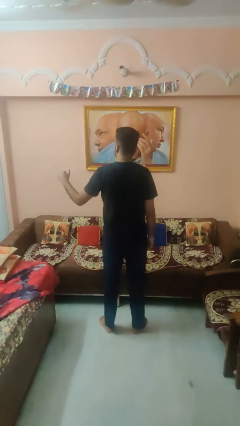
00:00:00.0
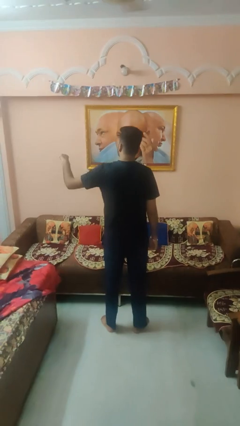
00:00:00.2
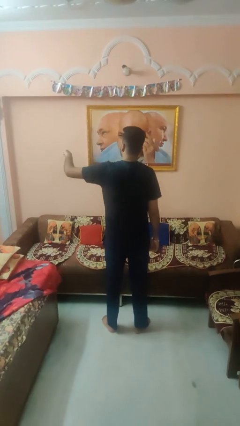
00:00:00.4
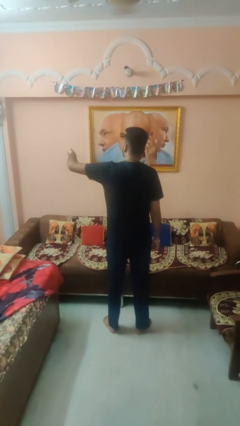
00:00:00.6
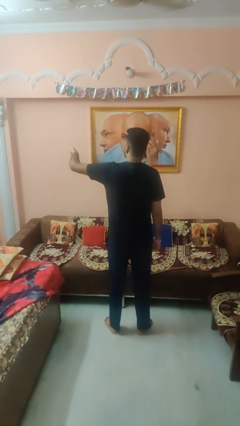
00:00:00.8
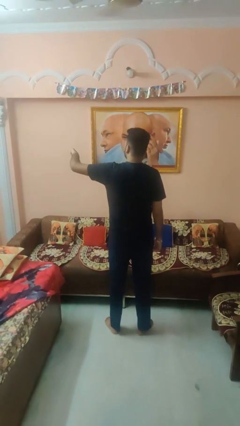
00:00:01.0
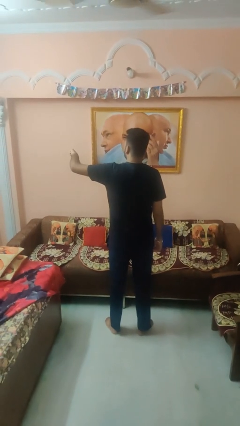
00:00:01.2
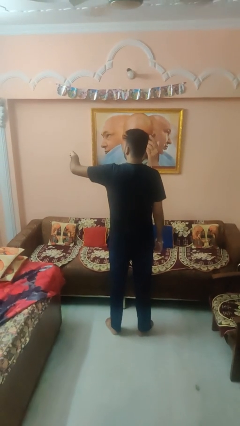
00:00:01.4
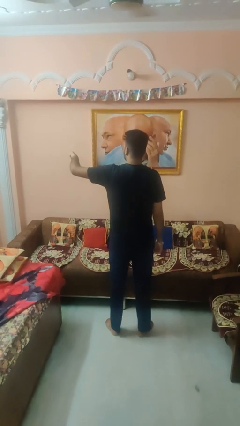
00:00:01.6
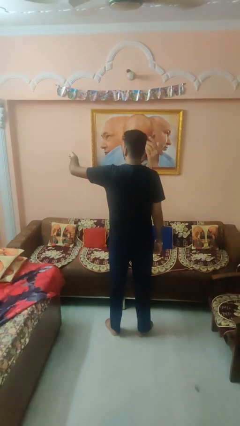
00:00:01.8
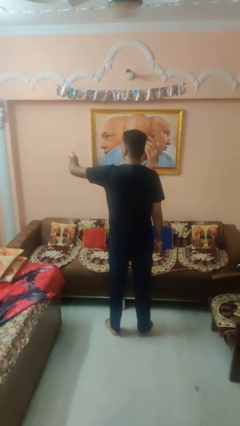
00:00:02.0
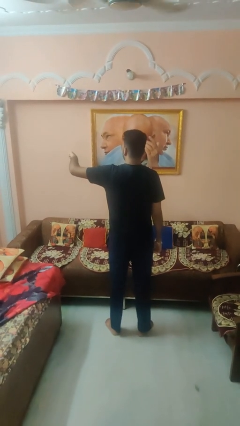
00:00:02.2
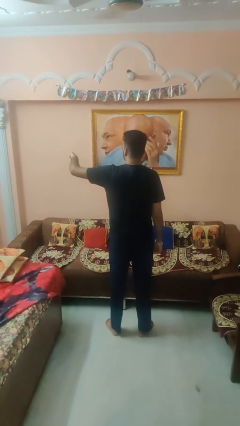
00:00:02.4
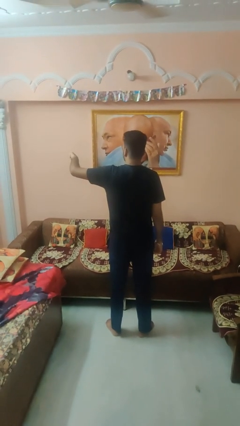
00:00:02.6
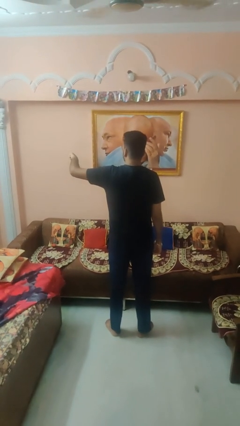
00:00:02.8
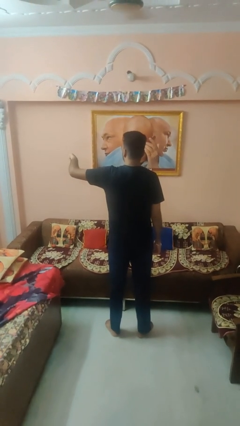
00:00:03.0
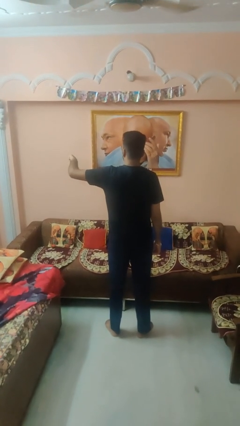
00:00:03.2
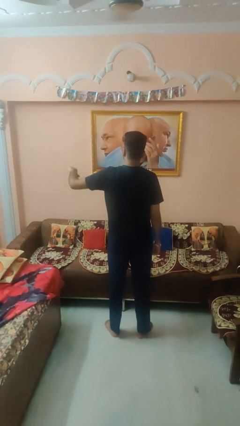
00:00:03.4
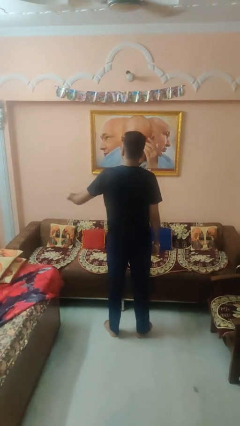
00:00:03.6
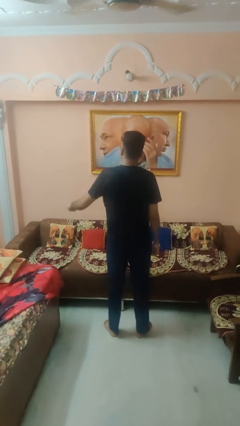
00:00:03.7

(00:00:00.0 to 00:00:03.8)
person gestures thumbs down

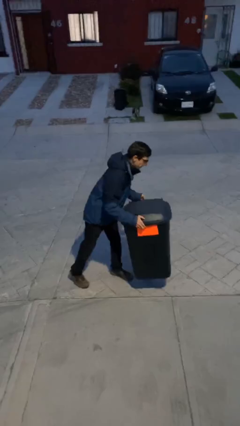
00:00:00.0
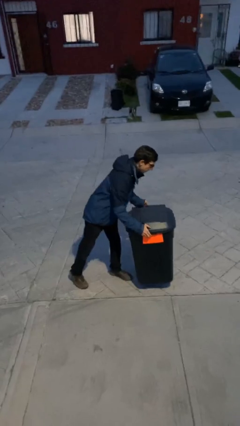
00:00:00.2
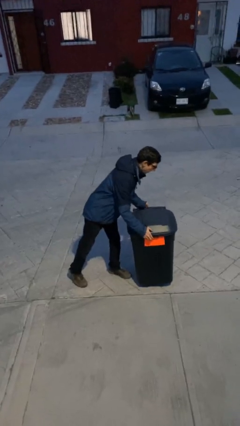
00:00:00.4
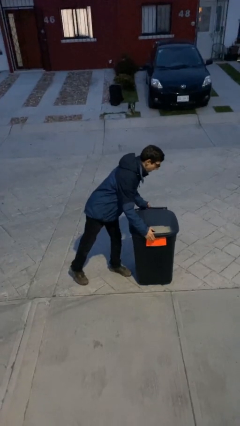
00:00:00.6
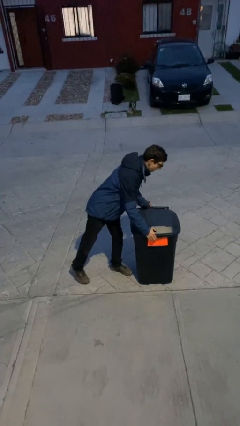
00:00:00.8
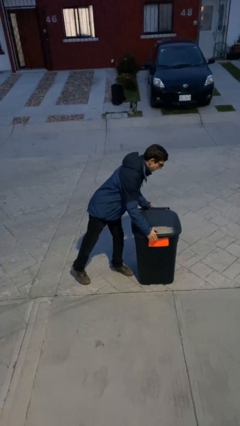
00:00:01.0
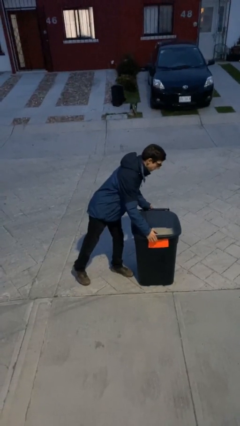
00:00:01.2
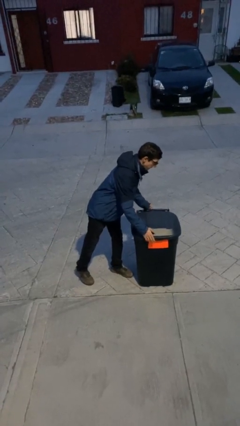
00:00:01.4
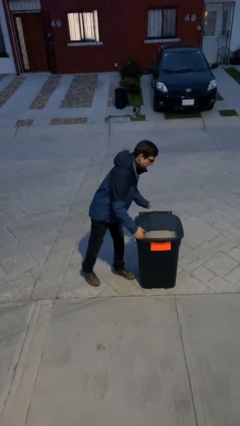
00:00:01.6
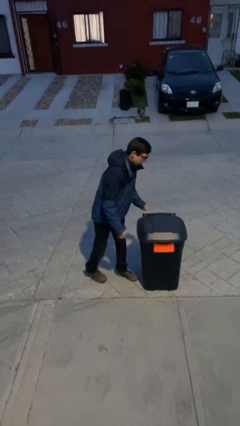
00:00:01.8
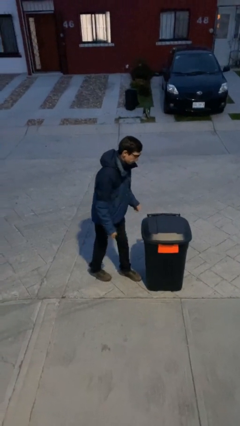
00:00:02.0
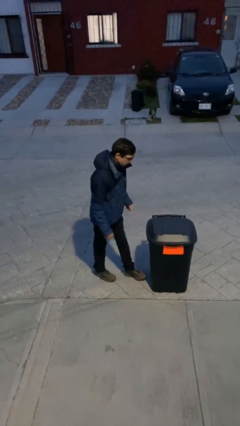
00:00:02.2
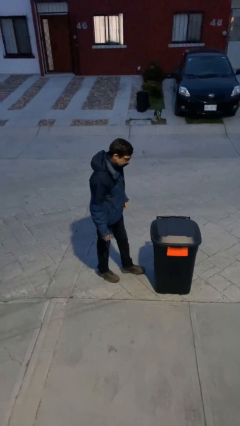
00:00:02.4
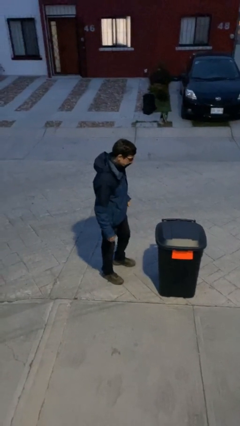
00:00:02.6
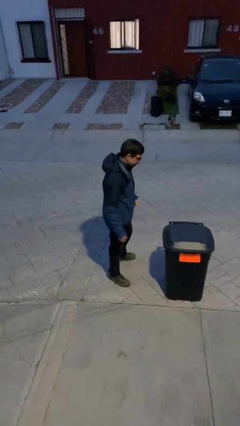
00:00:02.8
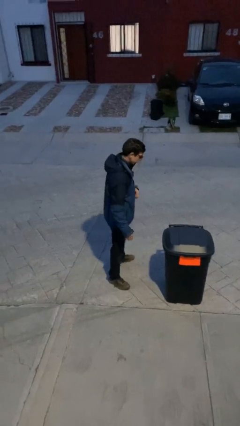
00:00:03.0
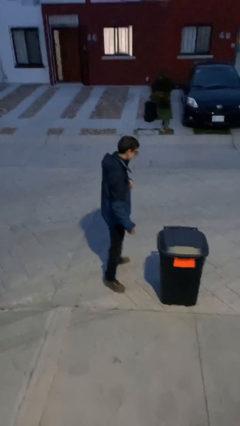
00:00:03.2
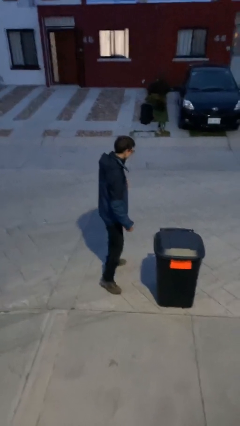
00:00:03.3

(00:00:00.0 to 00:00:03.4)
person puts down object on floor

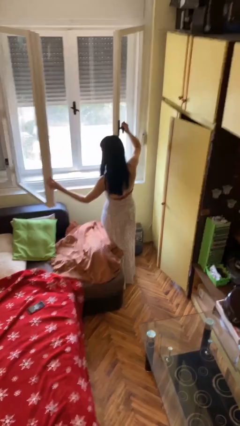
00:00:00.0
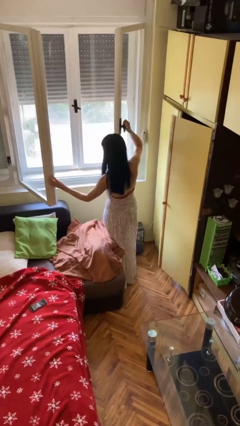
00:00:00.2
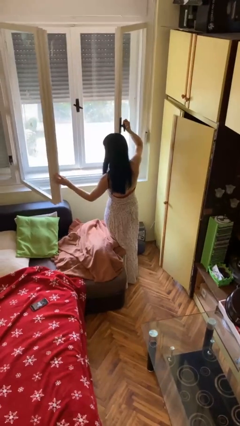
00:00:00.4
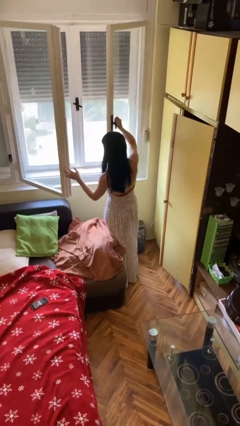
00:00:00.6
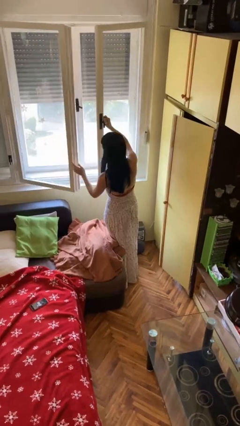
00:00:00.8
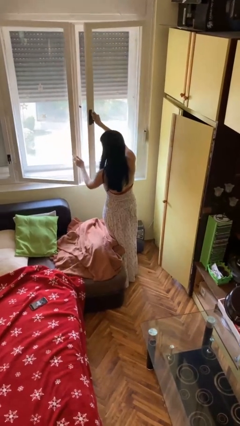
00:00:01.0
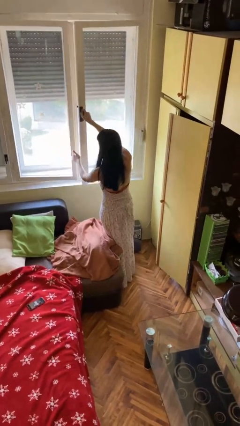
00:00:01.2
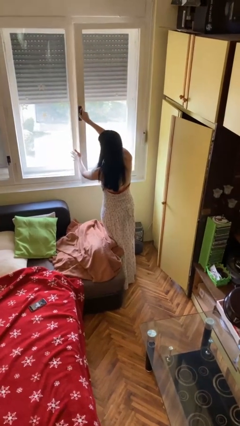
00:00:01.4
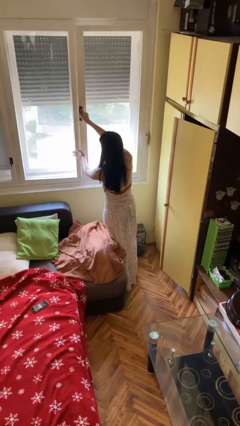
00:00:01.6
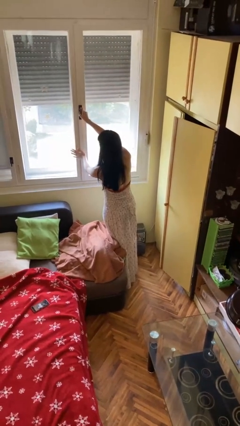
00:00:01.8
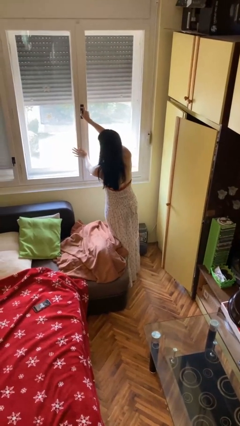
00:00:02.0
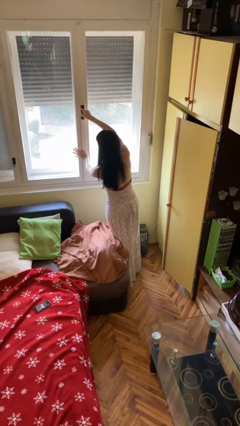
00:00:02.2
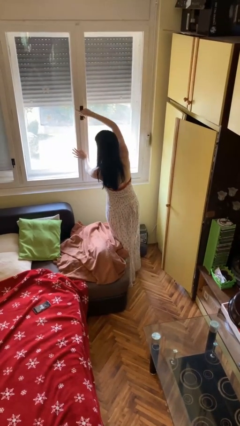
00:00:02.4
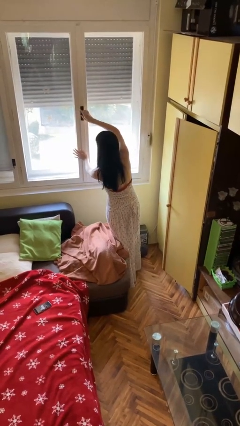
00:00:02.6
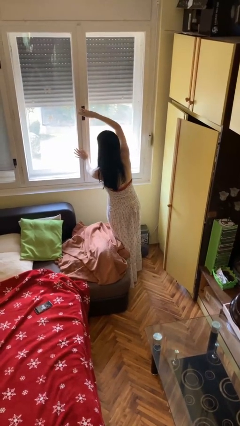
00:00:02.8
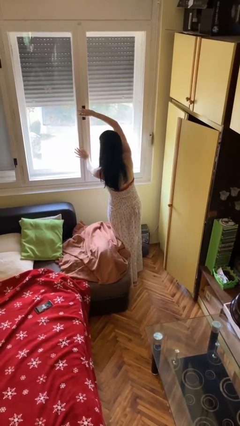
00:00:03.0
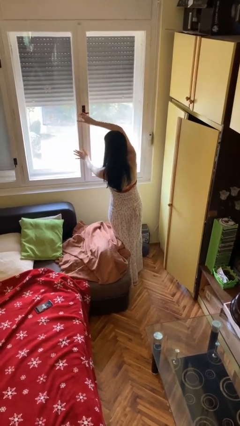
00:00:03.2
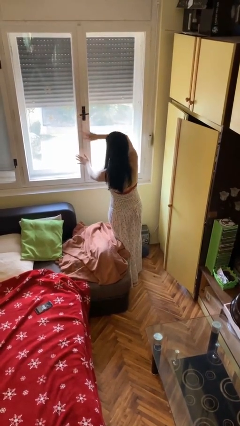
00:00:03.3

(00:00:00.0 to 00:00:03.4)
person closes microwave

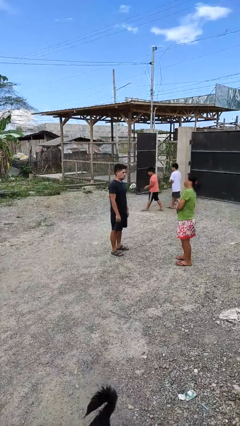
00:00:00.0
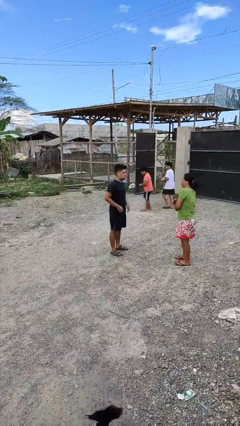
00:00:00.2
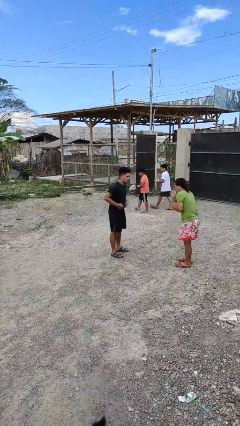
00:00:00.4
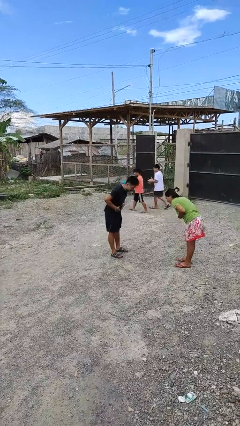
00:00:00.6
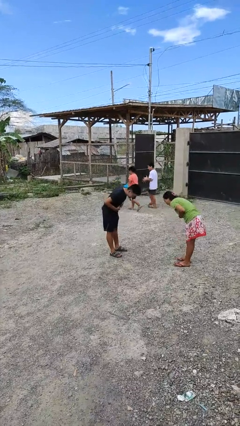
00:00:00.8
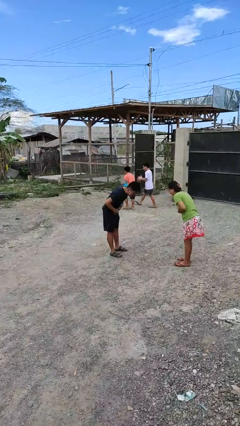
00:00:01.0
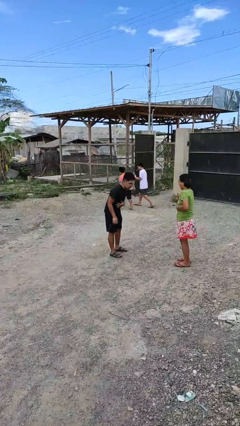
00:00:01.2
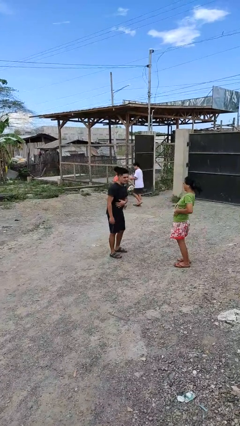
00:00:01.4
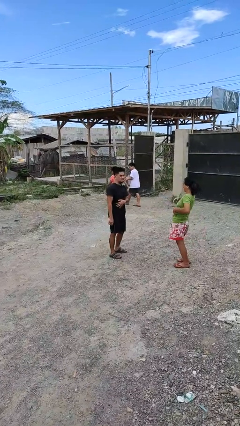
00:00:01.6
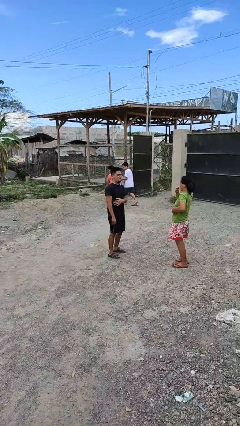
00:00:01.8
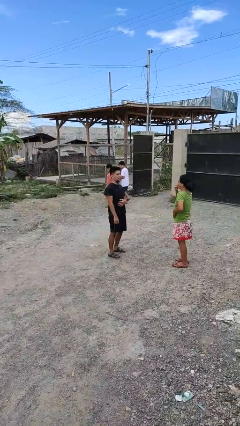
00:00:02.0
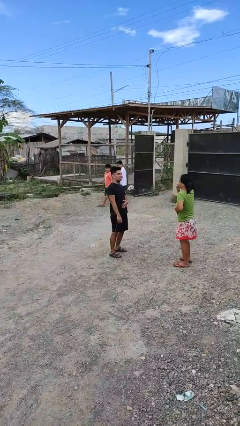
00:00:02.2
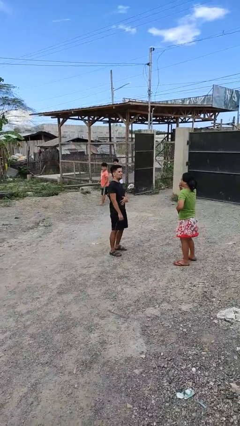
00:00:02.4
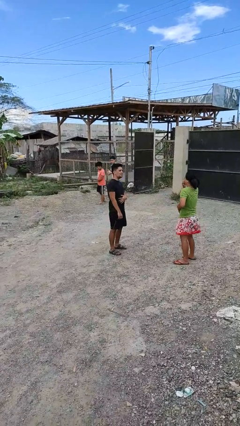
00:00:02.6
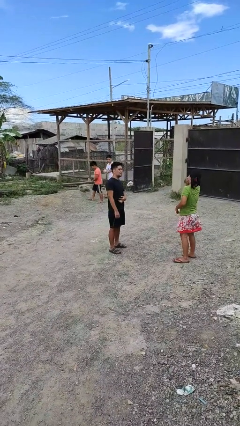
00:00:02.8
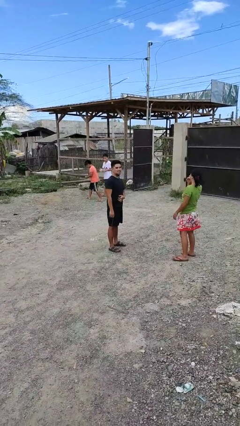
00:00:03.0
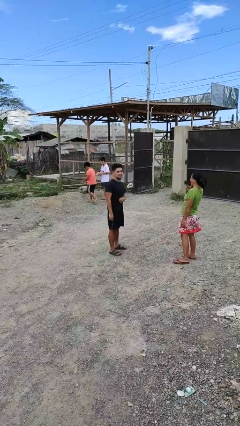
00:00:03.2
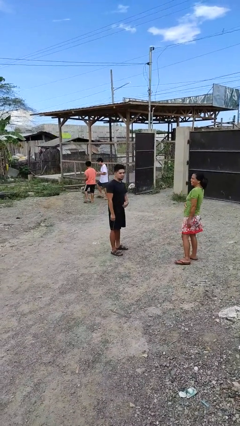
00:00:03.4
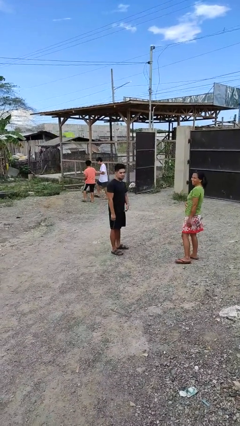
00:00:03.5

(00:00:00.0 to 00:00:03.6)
person laughs with person

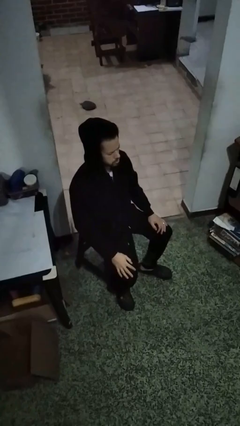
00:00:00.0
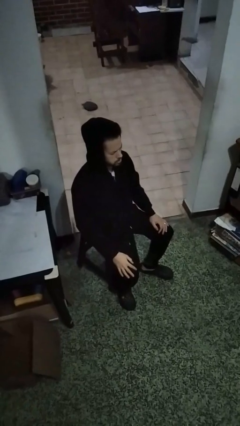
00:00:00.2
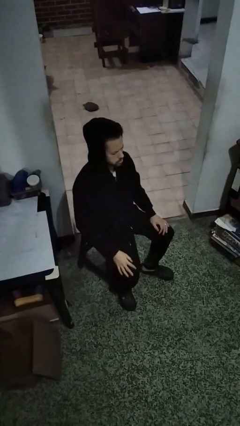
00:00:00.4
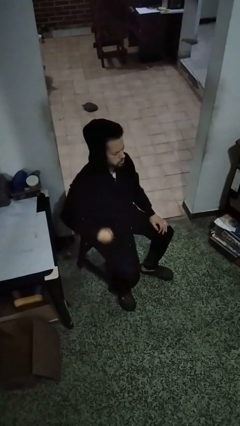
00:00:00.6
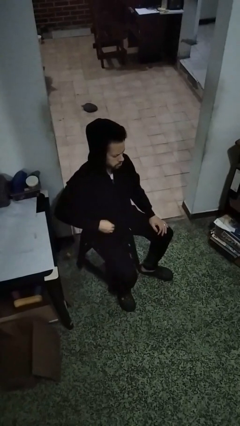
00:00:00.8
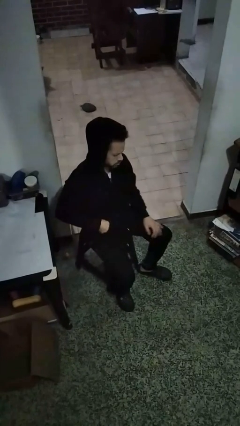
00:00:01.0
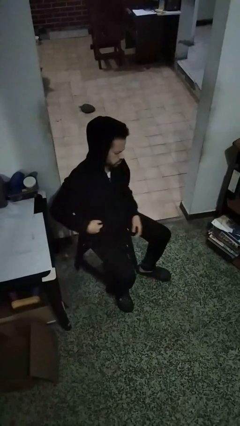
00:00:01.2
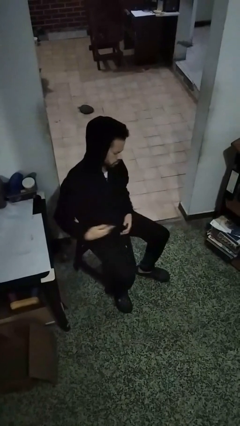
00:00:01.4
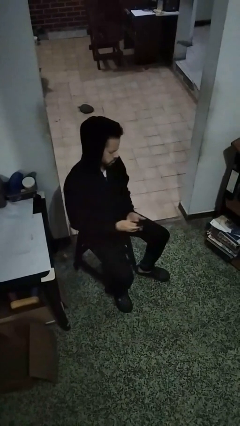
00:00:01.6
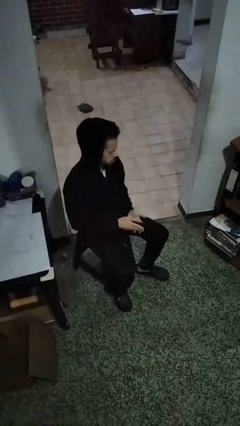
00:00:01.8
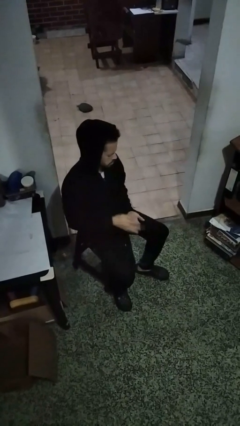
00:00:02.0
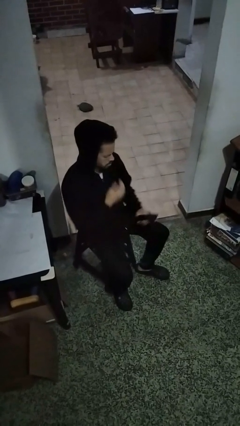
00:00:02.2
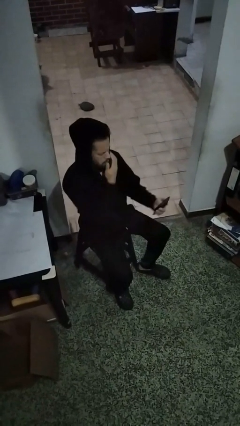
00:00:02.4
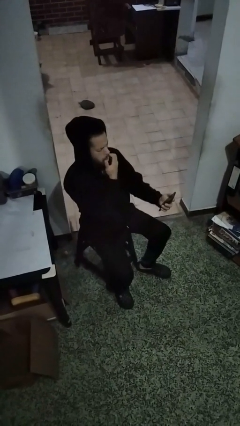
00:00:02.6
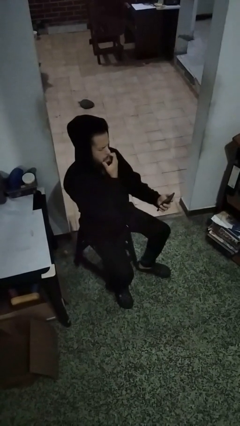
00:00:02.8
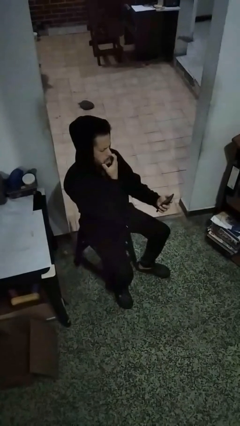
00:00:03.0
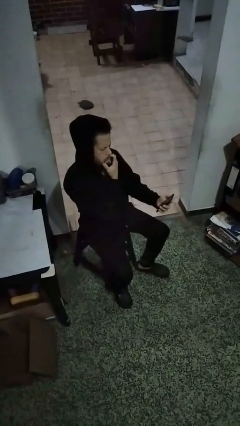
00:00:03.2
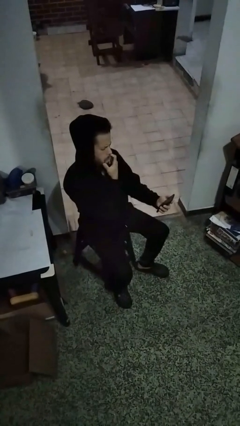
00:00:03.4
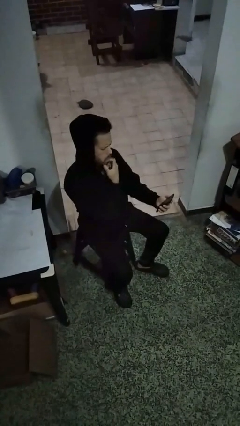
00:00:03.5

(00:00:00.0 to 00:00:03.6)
person takes phone from pocket
